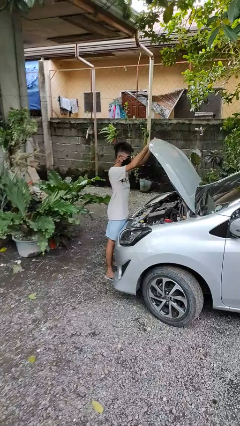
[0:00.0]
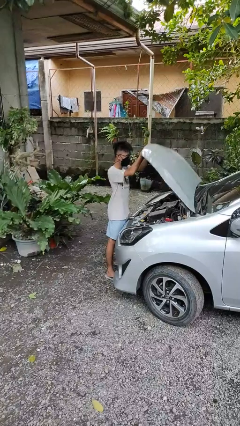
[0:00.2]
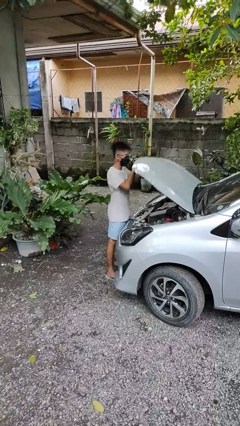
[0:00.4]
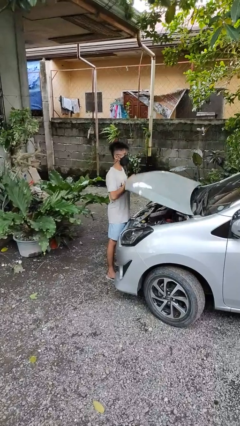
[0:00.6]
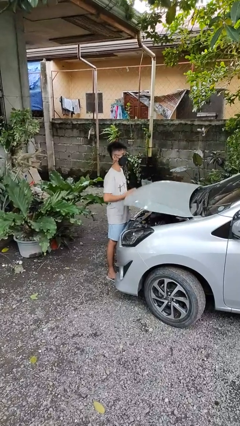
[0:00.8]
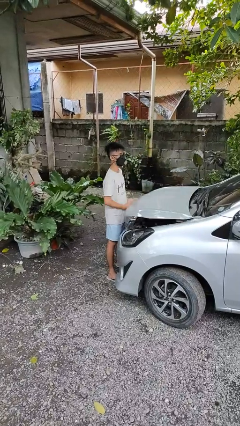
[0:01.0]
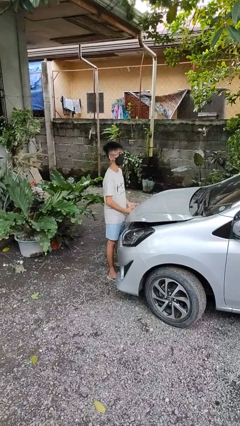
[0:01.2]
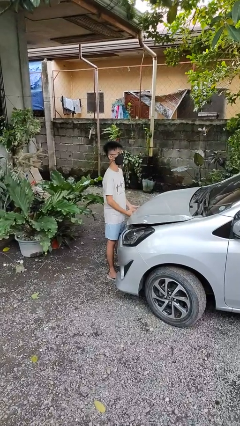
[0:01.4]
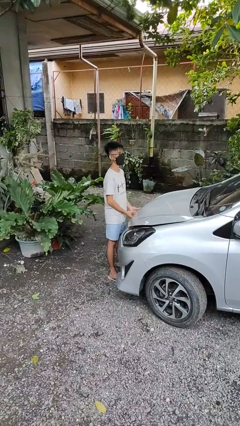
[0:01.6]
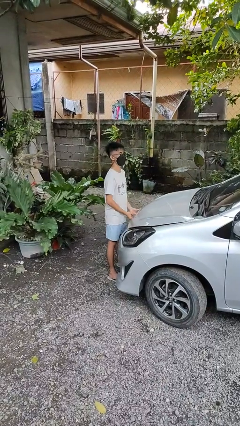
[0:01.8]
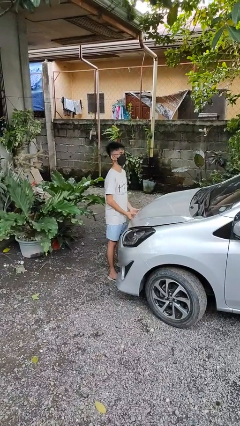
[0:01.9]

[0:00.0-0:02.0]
person closes car hood

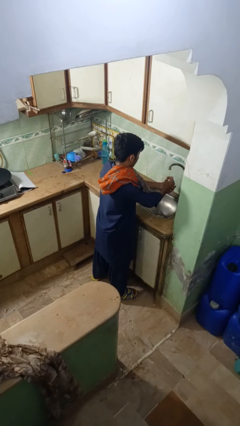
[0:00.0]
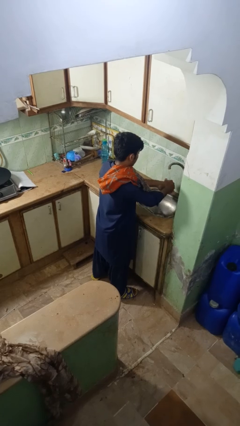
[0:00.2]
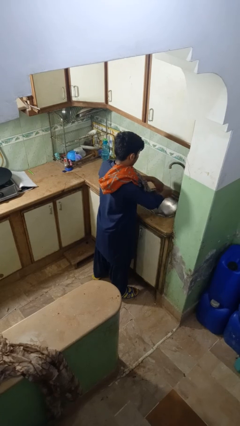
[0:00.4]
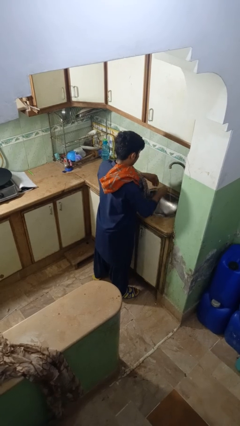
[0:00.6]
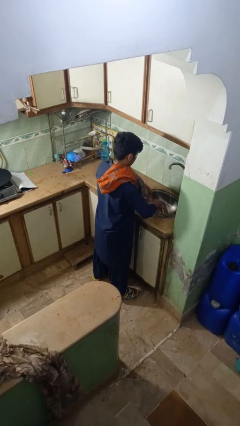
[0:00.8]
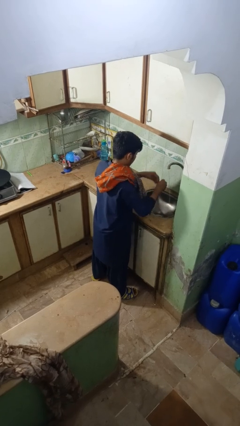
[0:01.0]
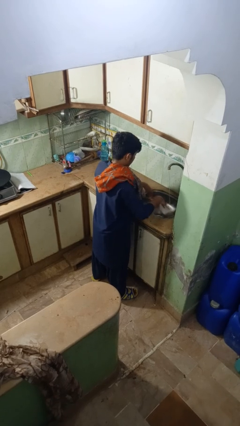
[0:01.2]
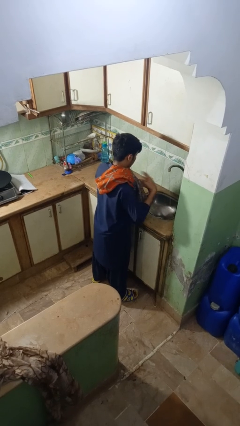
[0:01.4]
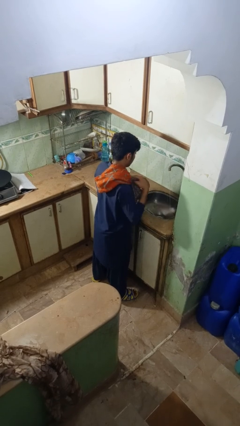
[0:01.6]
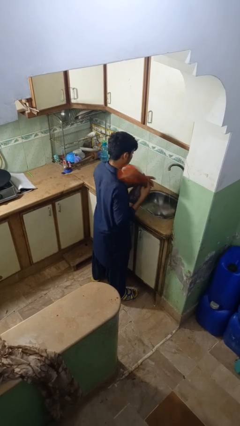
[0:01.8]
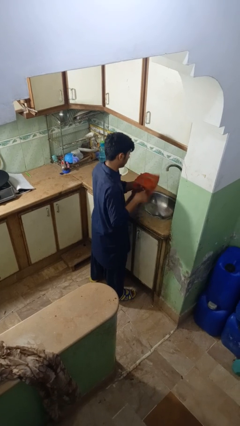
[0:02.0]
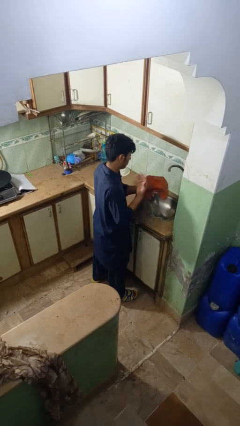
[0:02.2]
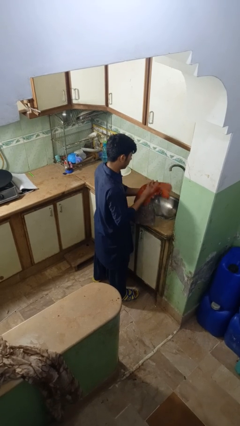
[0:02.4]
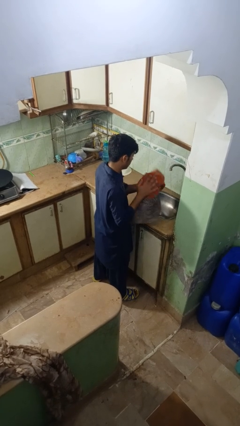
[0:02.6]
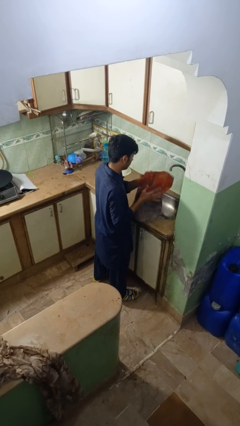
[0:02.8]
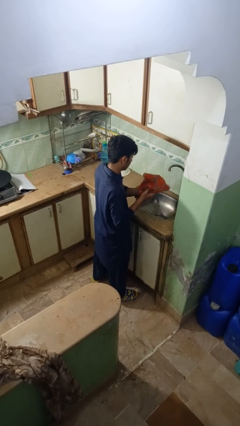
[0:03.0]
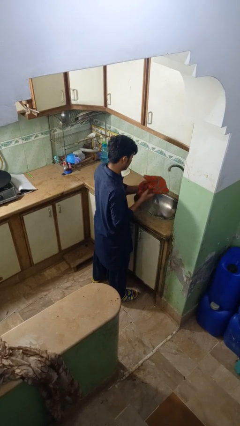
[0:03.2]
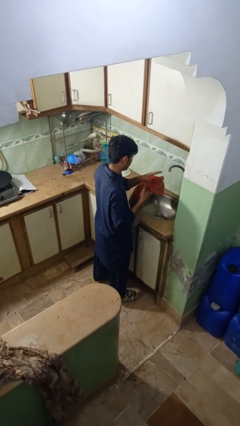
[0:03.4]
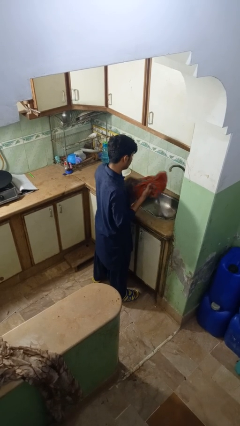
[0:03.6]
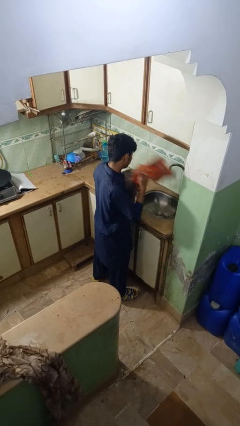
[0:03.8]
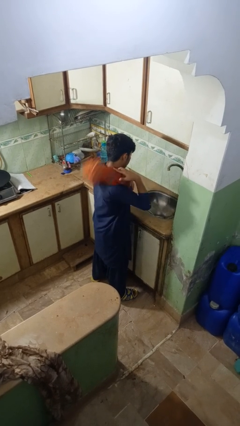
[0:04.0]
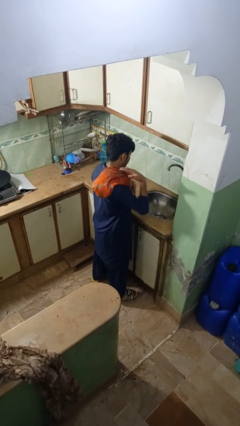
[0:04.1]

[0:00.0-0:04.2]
person dries hands with towel

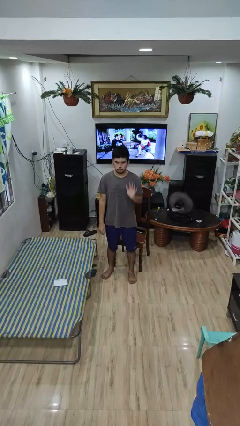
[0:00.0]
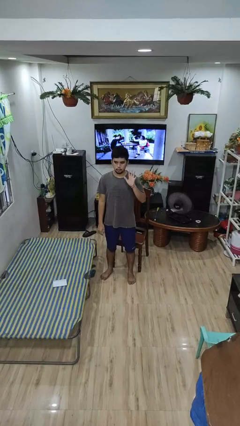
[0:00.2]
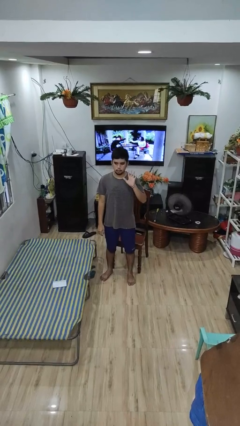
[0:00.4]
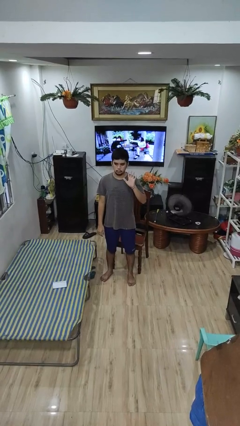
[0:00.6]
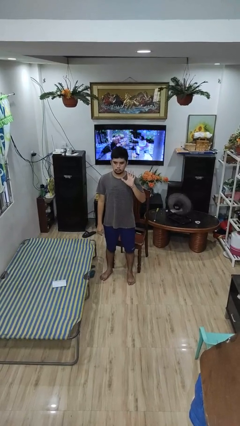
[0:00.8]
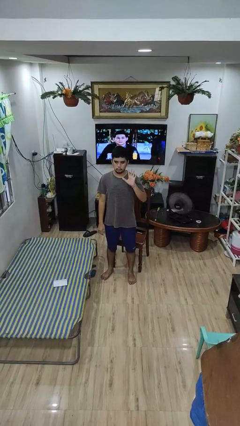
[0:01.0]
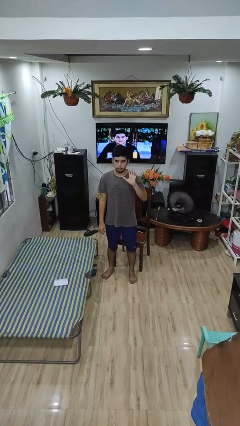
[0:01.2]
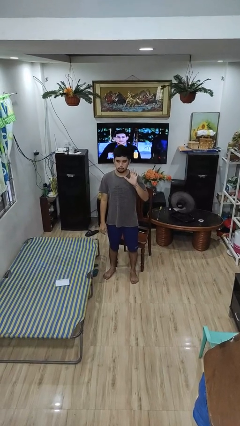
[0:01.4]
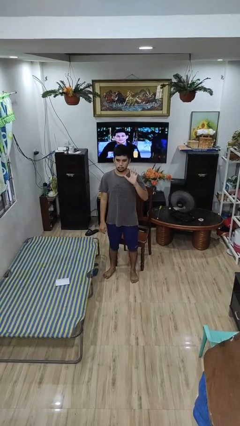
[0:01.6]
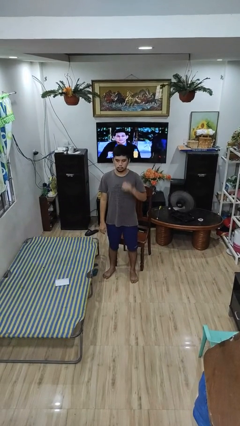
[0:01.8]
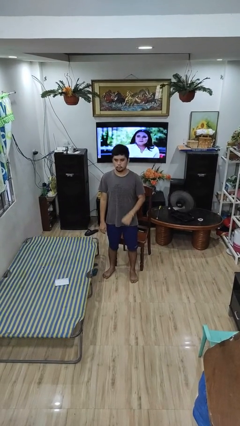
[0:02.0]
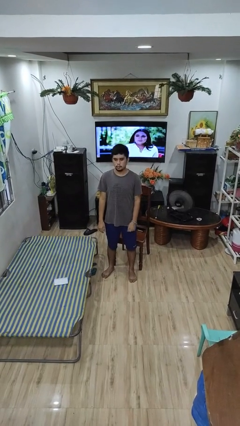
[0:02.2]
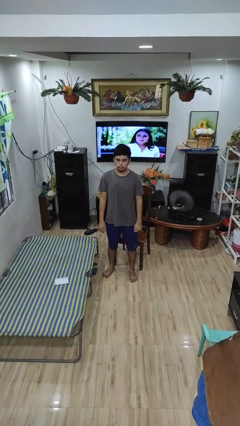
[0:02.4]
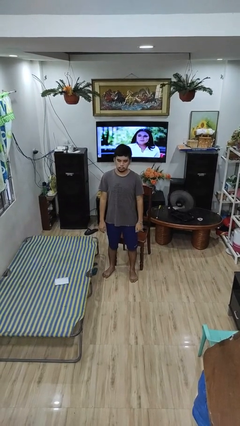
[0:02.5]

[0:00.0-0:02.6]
person gestures number five

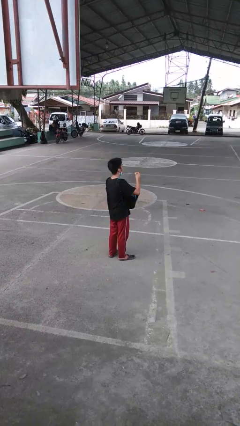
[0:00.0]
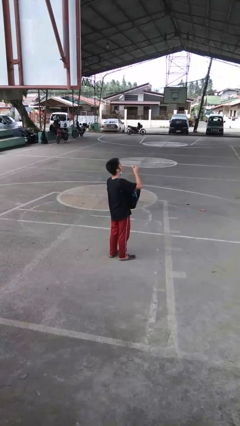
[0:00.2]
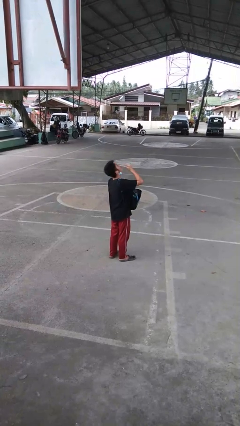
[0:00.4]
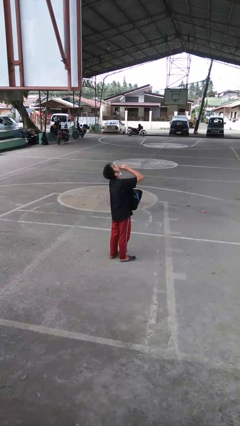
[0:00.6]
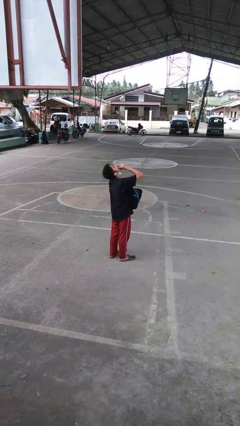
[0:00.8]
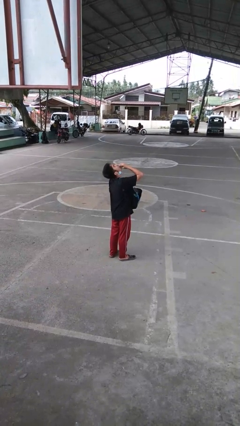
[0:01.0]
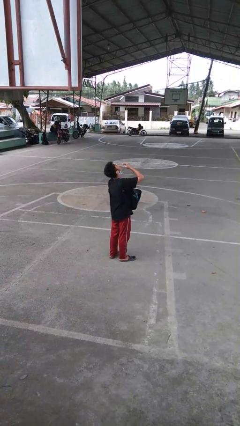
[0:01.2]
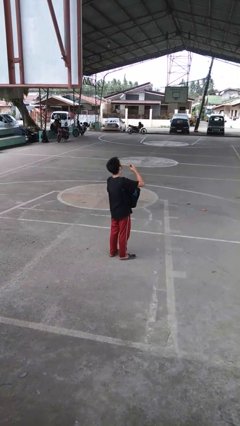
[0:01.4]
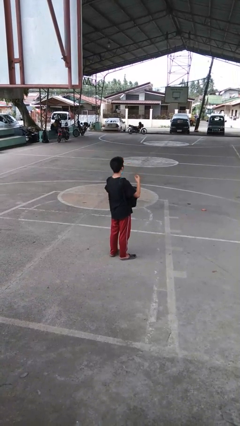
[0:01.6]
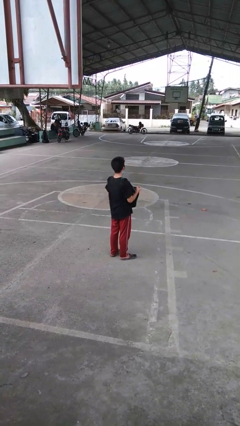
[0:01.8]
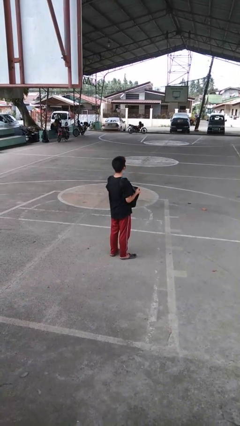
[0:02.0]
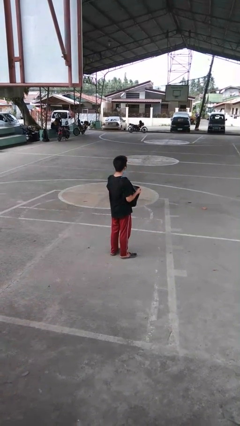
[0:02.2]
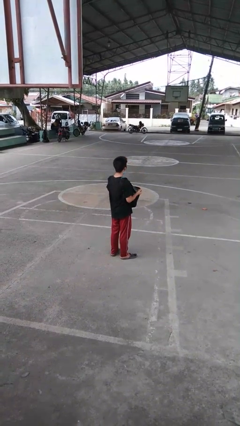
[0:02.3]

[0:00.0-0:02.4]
person eats snack from bag

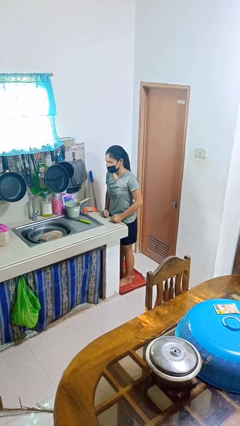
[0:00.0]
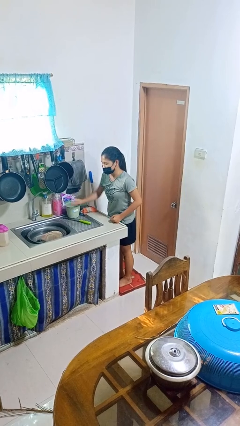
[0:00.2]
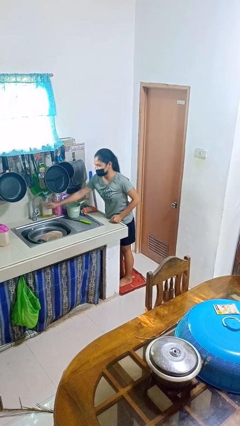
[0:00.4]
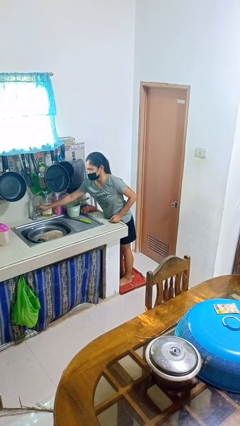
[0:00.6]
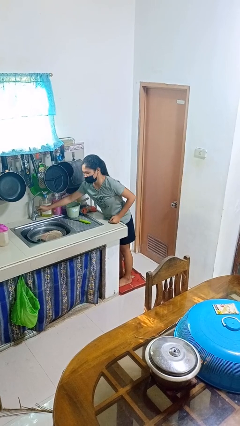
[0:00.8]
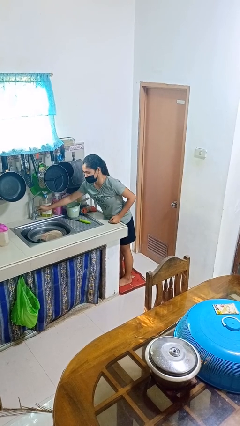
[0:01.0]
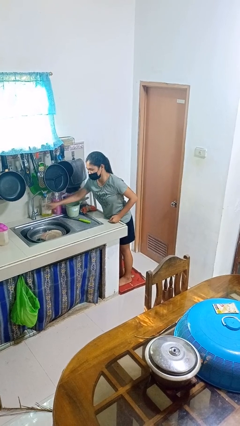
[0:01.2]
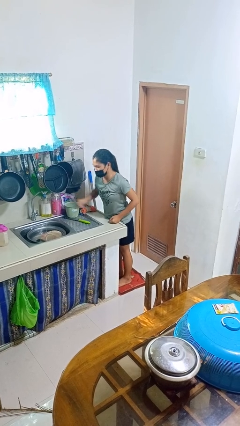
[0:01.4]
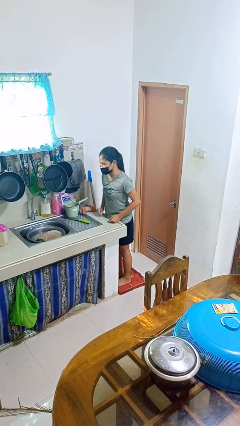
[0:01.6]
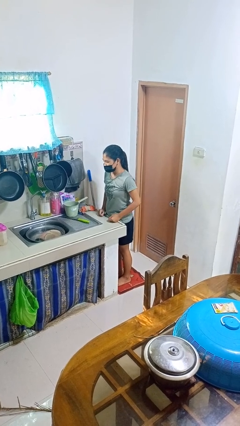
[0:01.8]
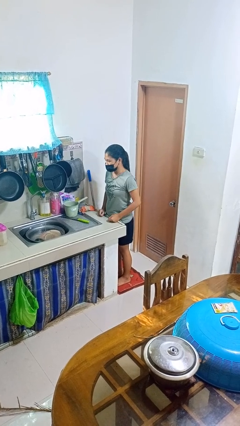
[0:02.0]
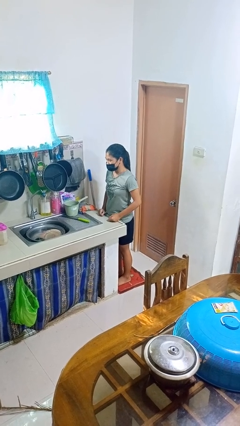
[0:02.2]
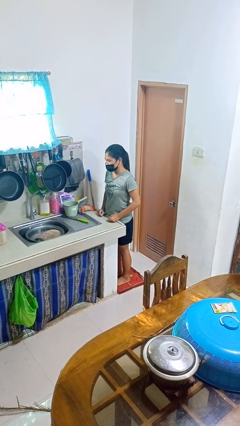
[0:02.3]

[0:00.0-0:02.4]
person turns on faucet

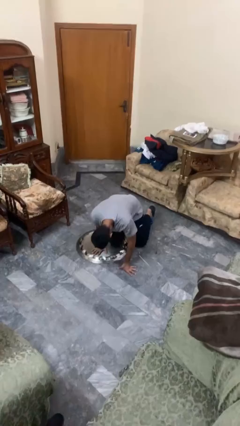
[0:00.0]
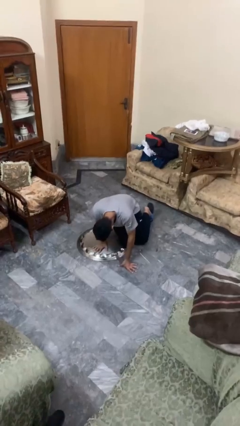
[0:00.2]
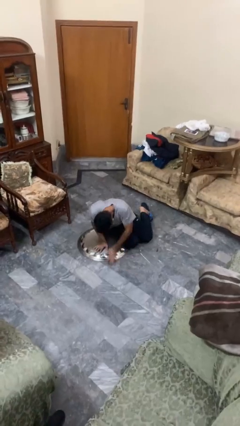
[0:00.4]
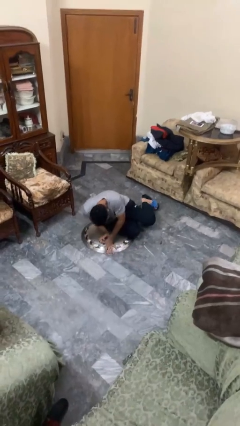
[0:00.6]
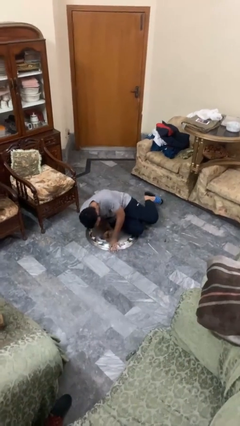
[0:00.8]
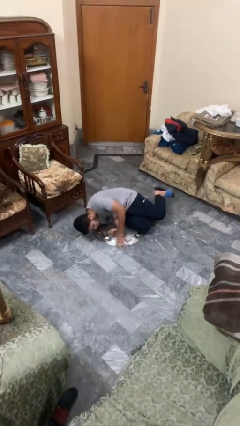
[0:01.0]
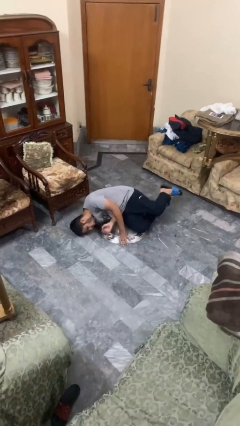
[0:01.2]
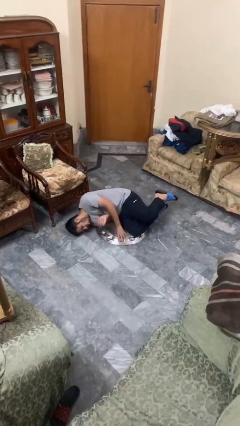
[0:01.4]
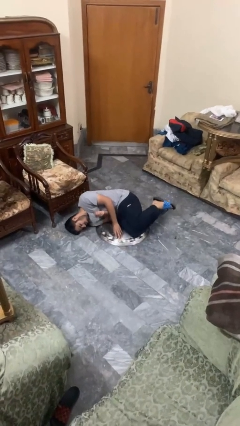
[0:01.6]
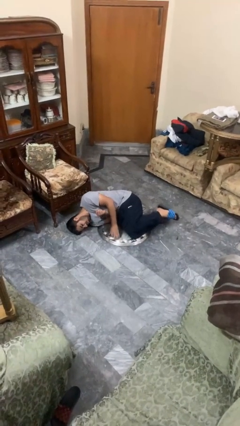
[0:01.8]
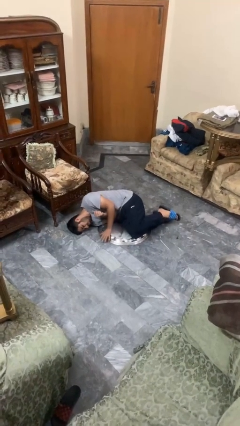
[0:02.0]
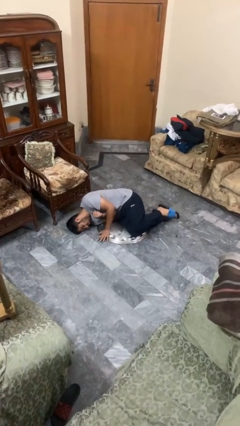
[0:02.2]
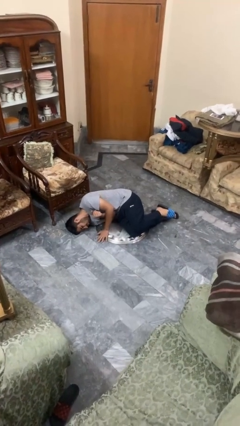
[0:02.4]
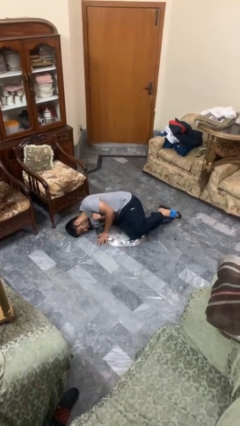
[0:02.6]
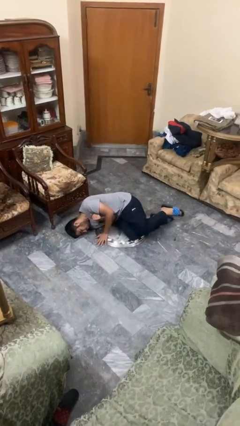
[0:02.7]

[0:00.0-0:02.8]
person lies down on floor

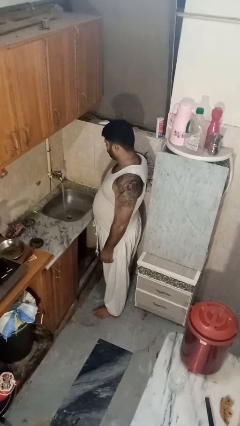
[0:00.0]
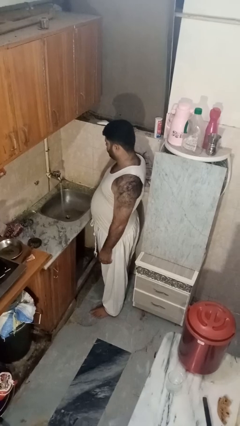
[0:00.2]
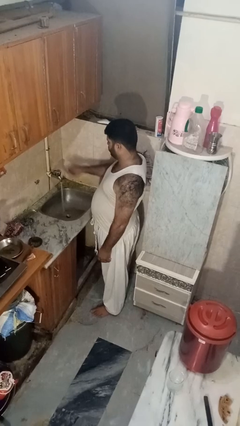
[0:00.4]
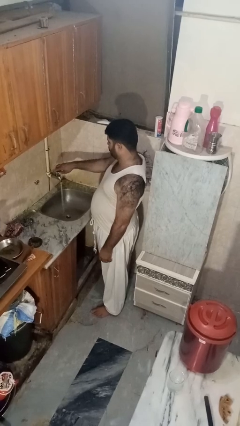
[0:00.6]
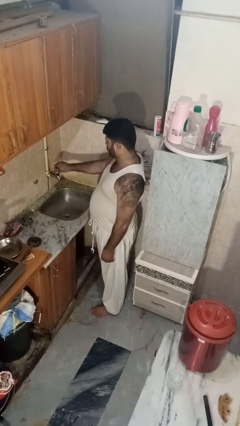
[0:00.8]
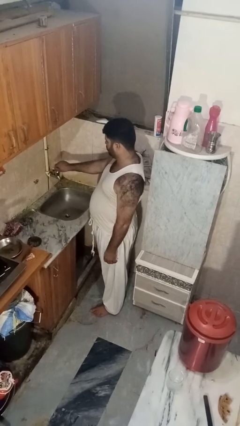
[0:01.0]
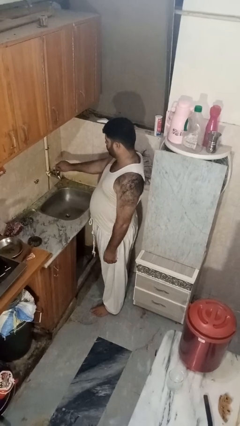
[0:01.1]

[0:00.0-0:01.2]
person turns off faucet
